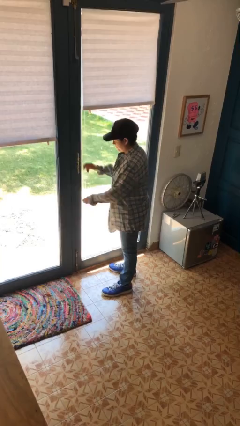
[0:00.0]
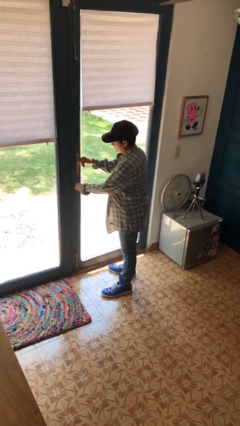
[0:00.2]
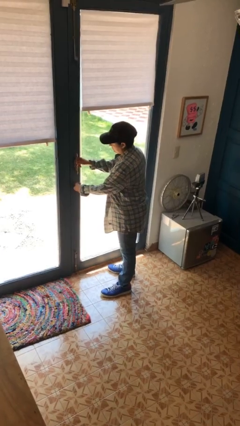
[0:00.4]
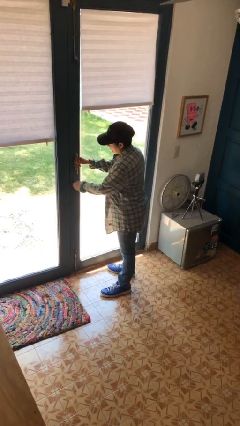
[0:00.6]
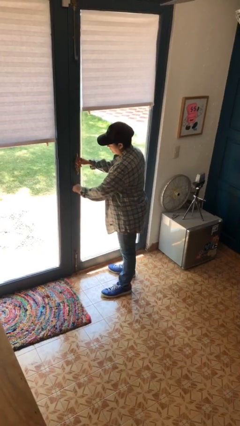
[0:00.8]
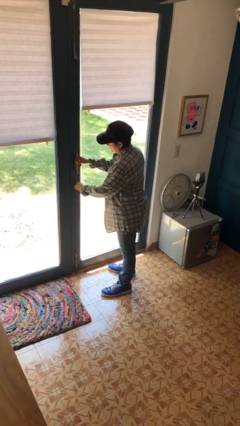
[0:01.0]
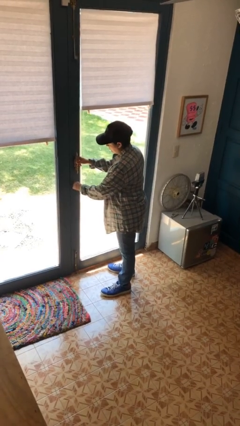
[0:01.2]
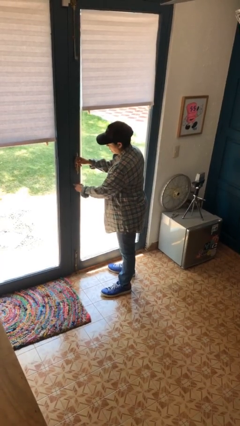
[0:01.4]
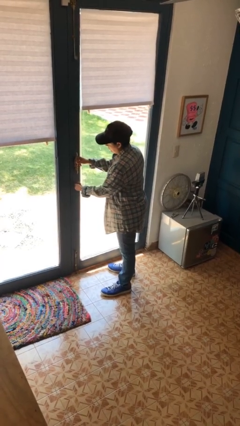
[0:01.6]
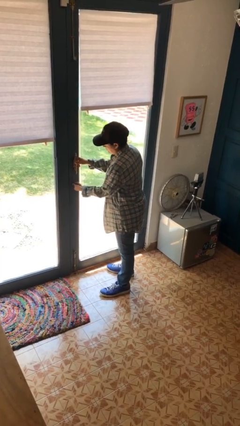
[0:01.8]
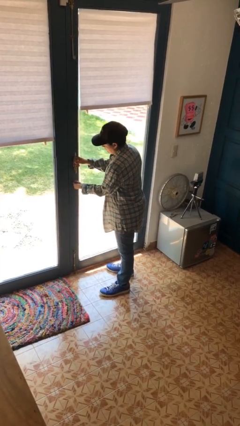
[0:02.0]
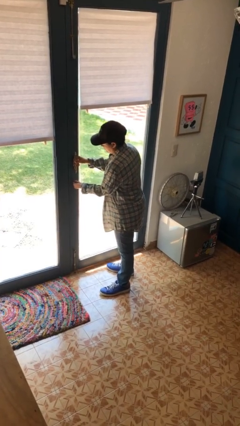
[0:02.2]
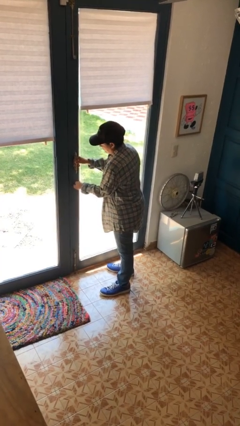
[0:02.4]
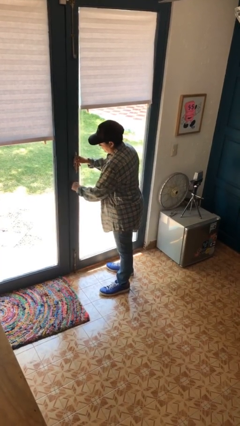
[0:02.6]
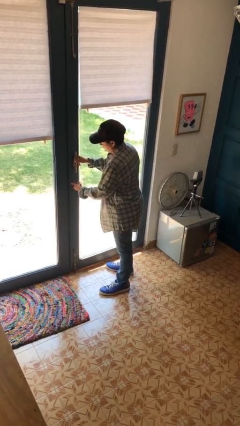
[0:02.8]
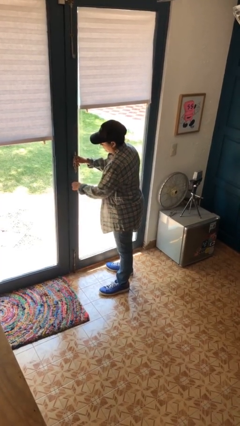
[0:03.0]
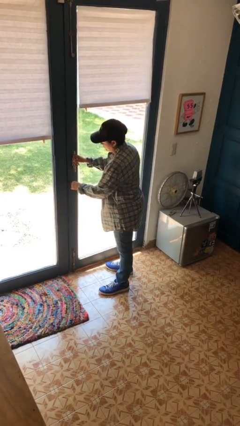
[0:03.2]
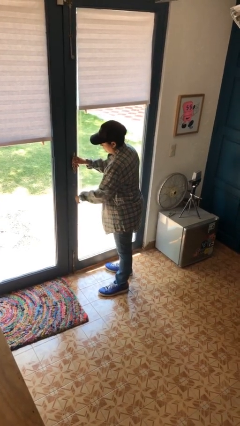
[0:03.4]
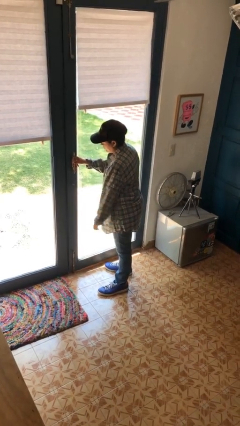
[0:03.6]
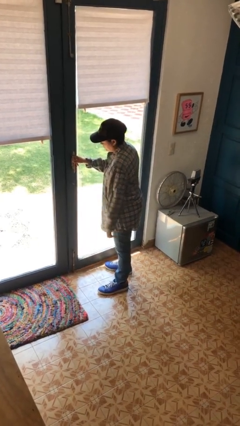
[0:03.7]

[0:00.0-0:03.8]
person unlocks door with keys

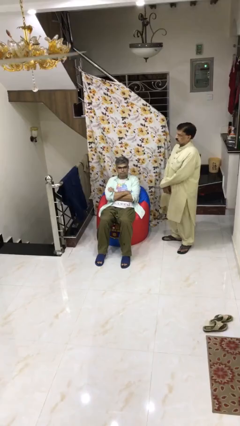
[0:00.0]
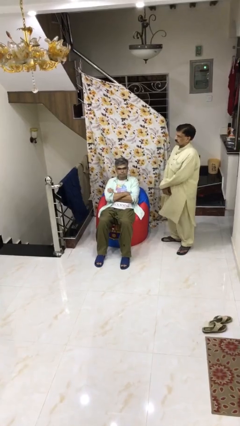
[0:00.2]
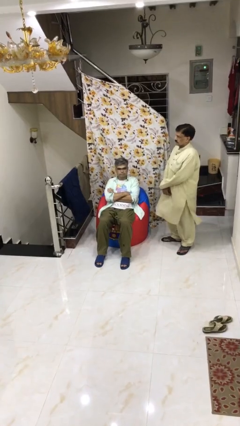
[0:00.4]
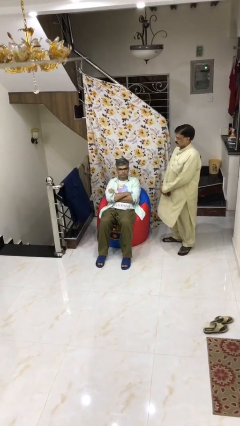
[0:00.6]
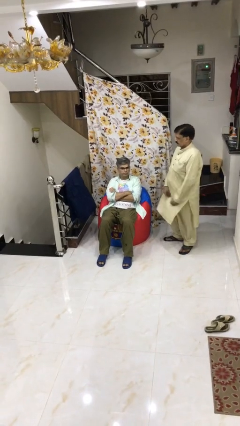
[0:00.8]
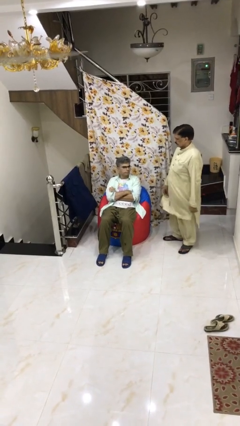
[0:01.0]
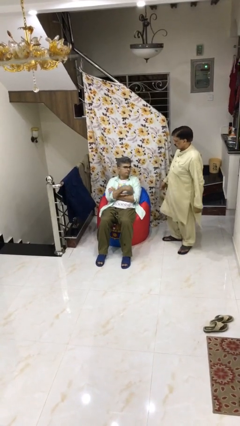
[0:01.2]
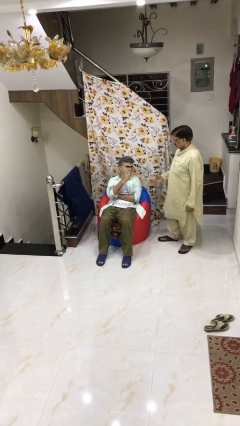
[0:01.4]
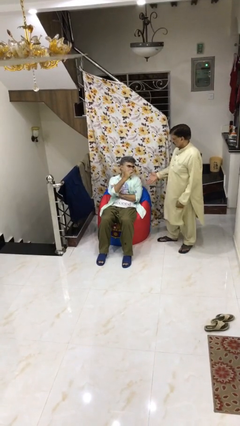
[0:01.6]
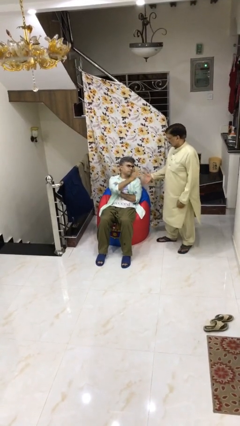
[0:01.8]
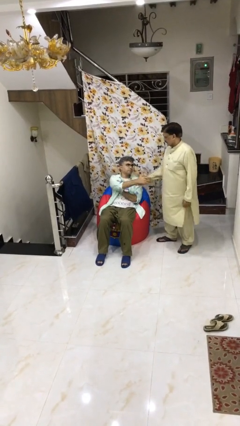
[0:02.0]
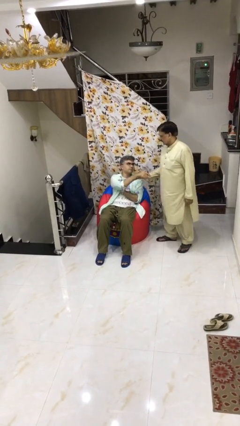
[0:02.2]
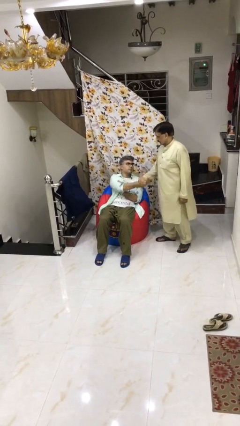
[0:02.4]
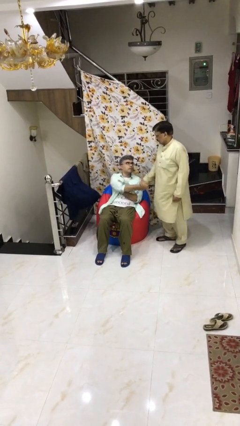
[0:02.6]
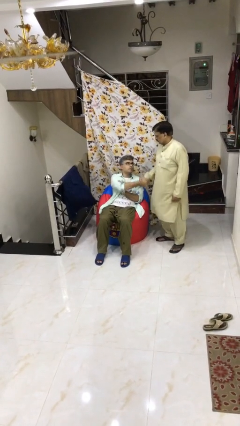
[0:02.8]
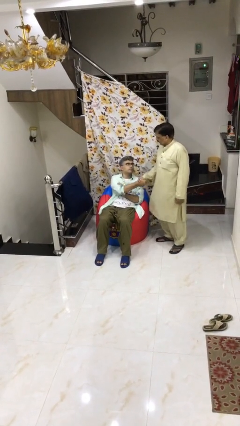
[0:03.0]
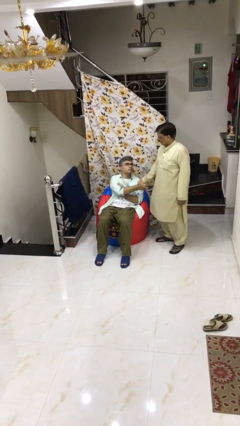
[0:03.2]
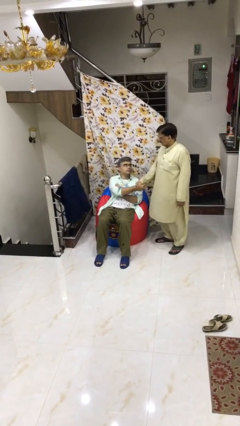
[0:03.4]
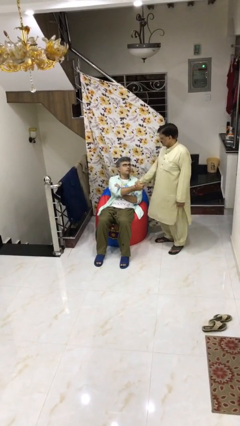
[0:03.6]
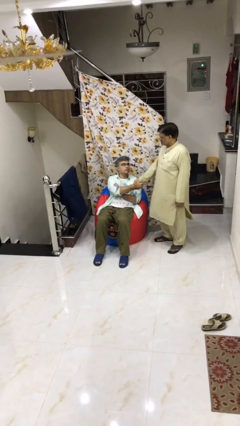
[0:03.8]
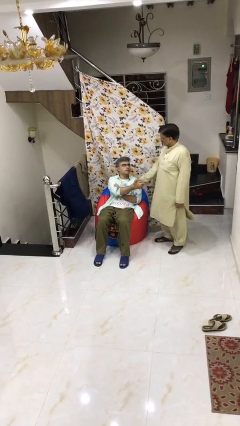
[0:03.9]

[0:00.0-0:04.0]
person shakes hand

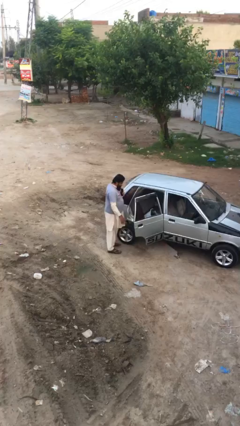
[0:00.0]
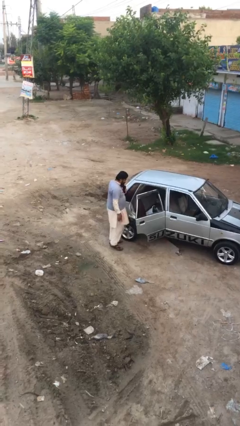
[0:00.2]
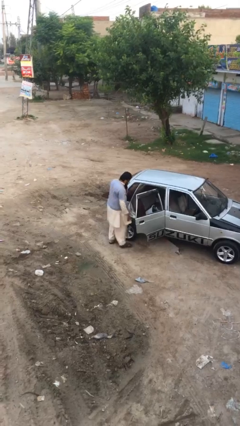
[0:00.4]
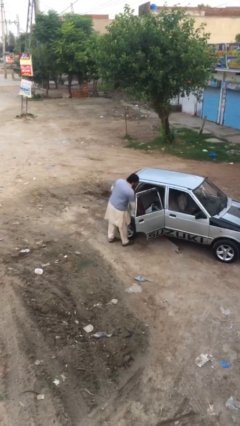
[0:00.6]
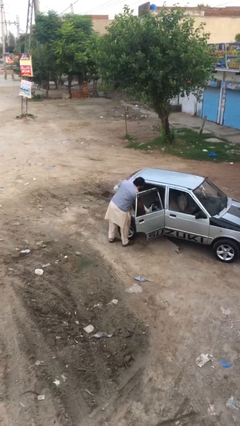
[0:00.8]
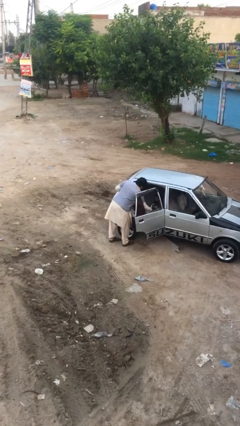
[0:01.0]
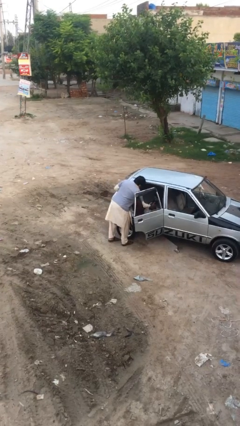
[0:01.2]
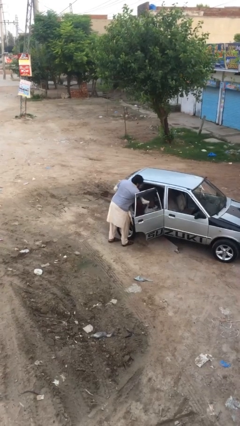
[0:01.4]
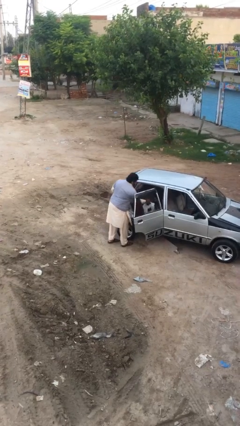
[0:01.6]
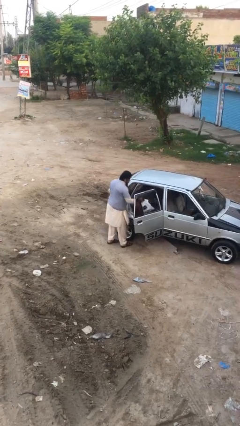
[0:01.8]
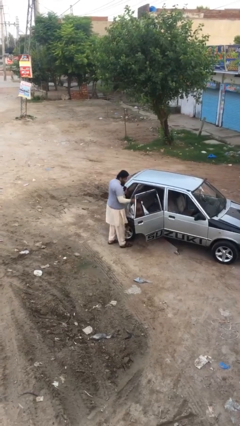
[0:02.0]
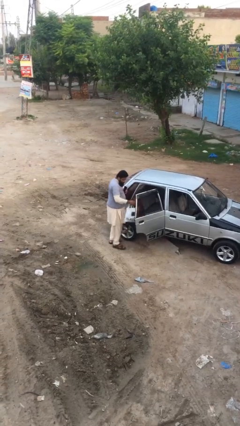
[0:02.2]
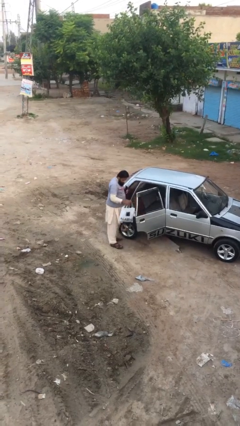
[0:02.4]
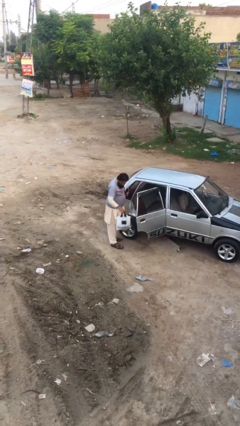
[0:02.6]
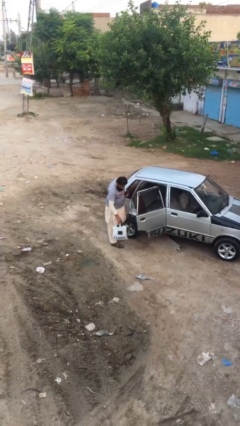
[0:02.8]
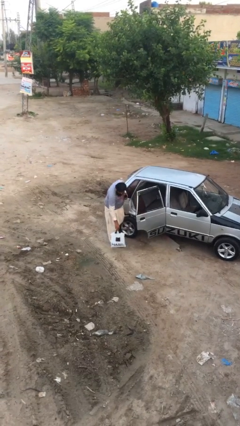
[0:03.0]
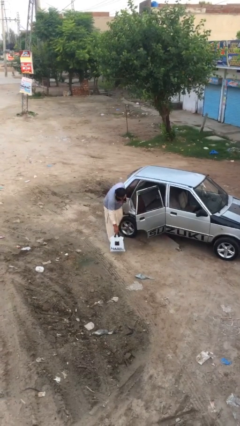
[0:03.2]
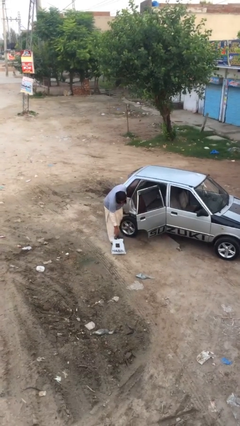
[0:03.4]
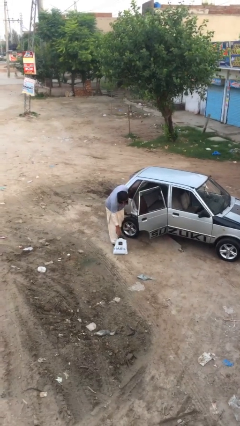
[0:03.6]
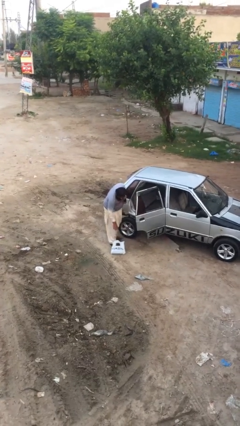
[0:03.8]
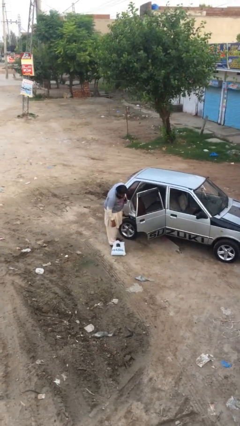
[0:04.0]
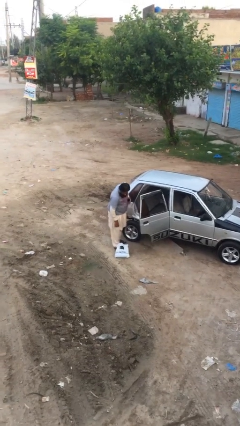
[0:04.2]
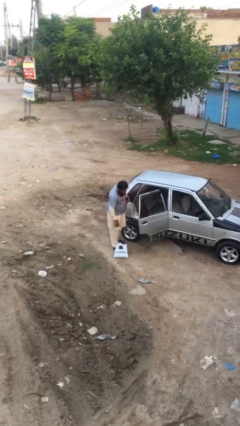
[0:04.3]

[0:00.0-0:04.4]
person unloads car

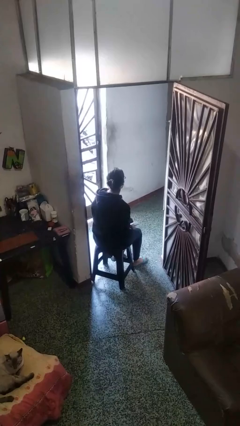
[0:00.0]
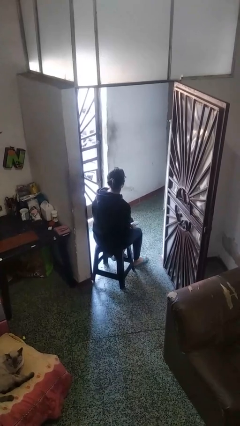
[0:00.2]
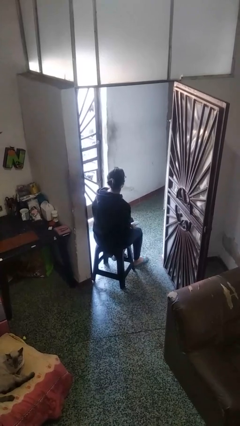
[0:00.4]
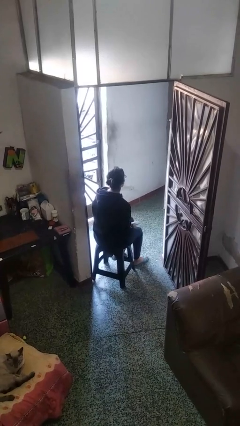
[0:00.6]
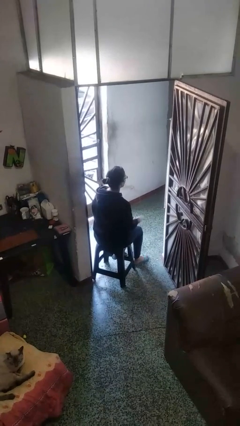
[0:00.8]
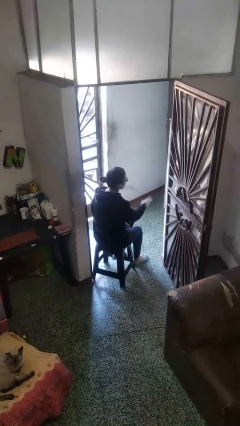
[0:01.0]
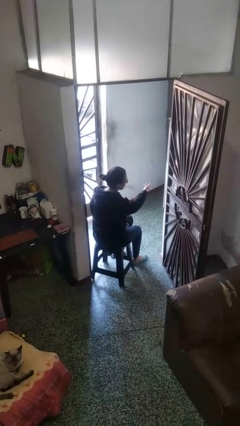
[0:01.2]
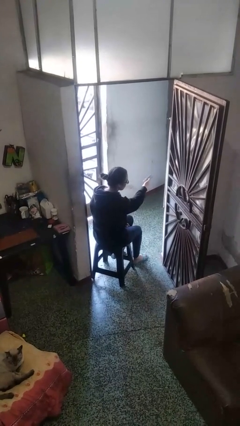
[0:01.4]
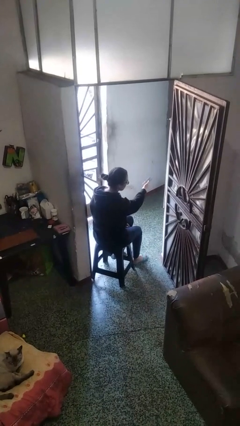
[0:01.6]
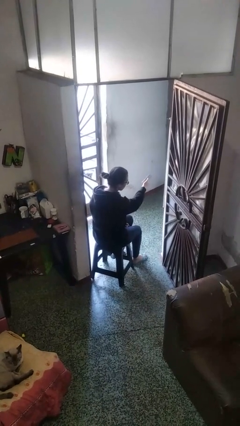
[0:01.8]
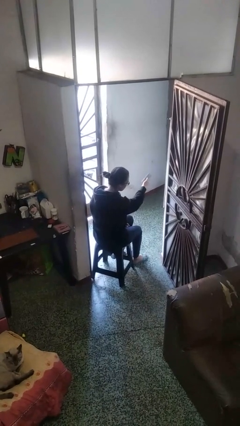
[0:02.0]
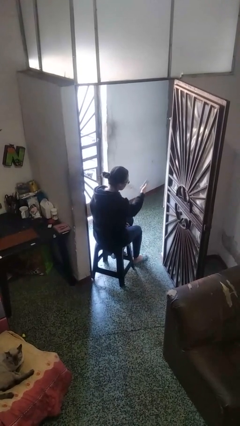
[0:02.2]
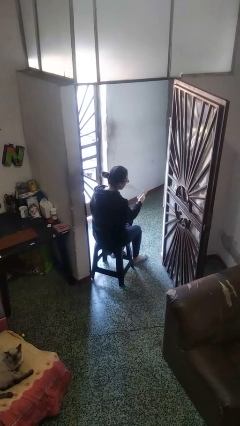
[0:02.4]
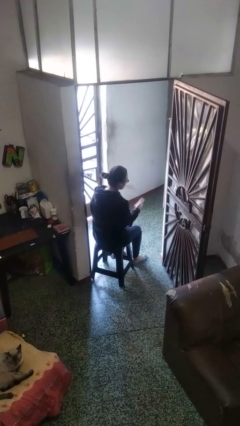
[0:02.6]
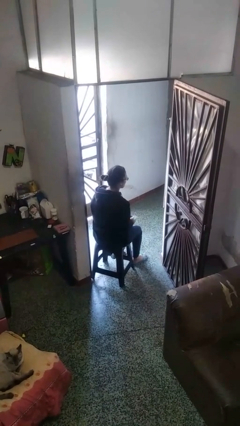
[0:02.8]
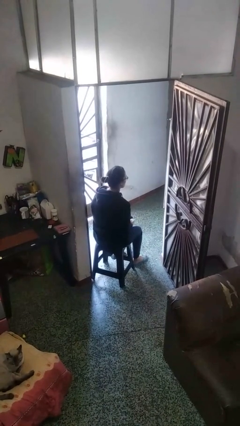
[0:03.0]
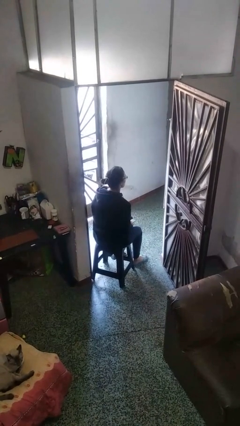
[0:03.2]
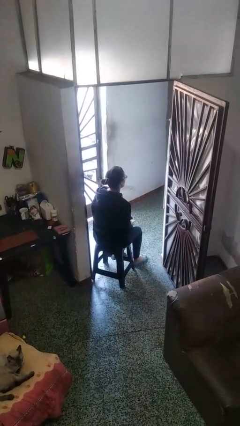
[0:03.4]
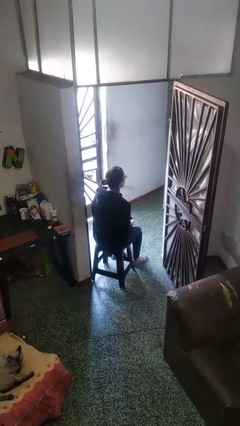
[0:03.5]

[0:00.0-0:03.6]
person uses television remote

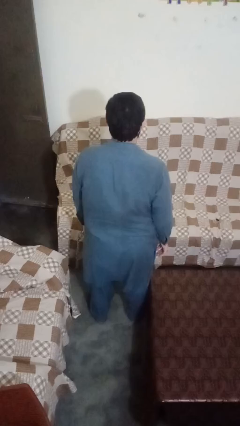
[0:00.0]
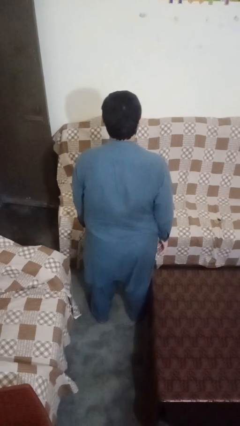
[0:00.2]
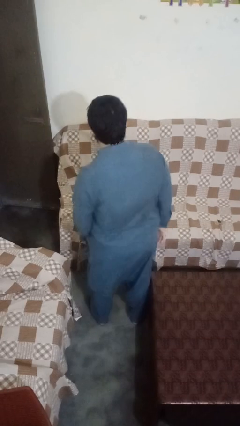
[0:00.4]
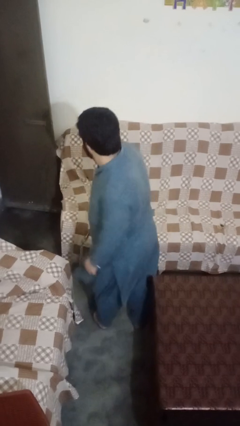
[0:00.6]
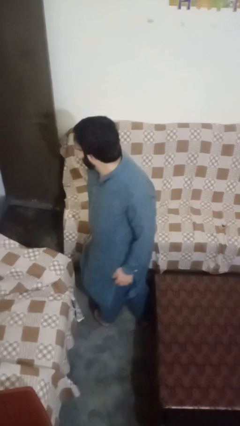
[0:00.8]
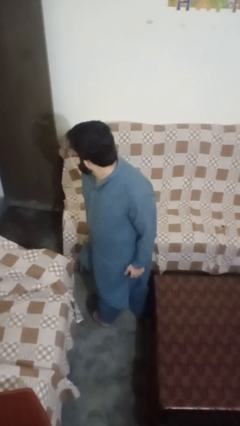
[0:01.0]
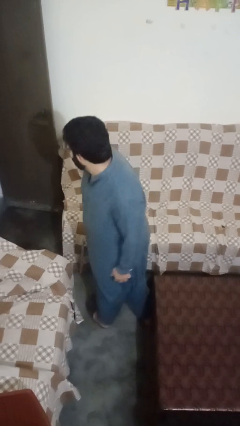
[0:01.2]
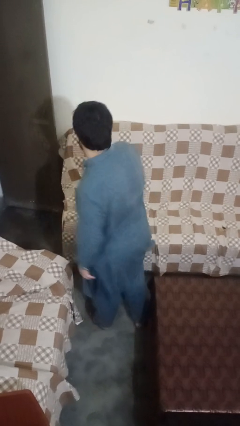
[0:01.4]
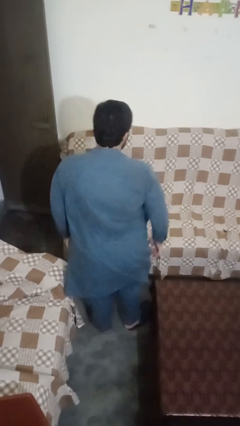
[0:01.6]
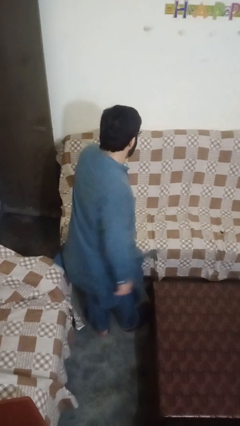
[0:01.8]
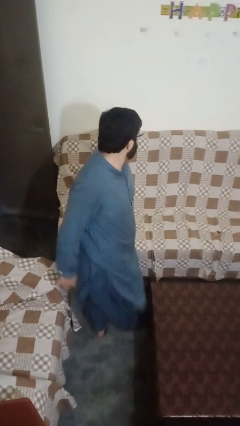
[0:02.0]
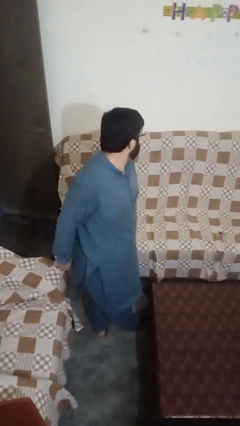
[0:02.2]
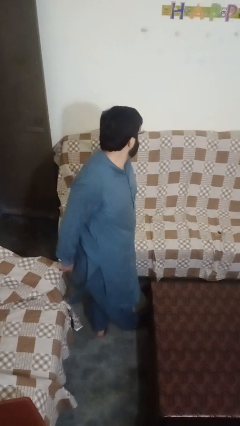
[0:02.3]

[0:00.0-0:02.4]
person twirls
